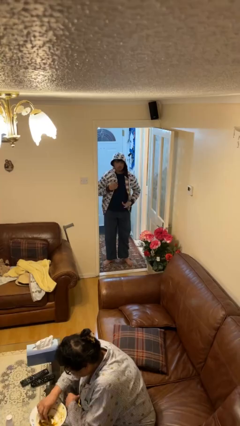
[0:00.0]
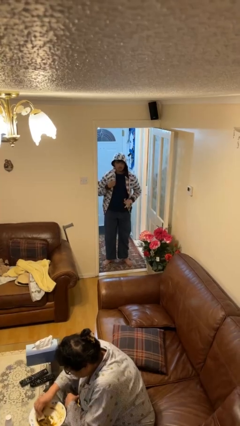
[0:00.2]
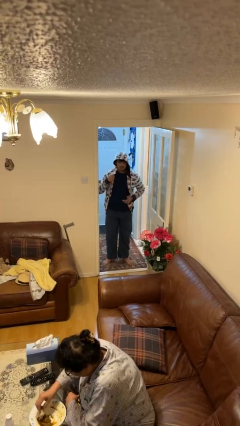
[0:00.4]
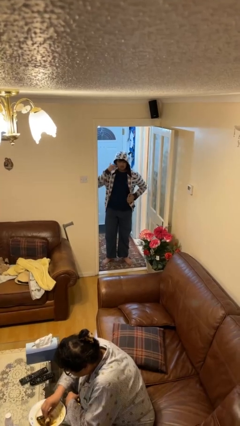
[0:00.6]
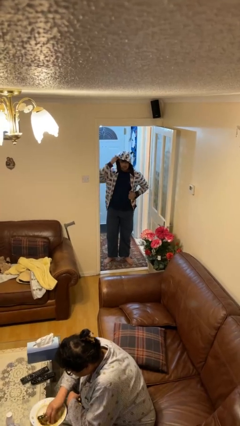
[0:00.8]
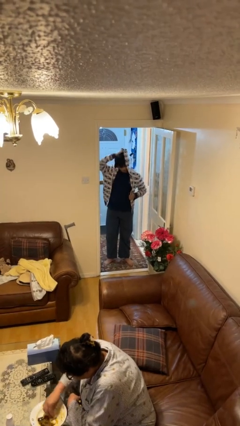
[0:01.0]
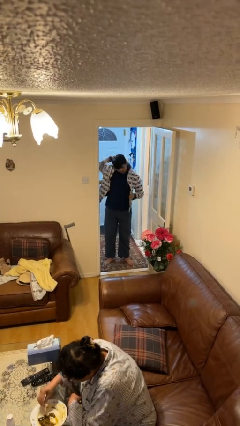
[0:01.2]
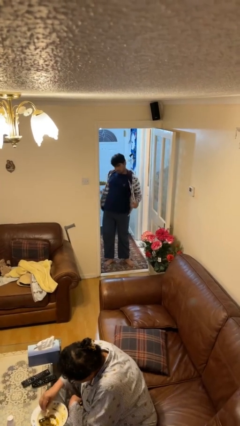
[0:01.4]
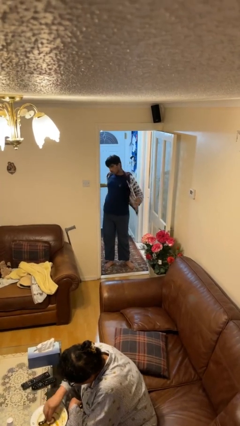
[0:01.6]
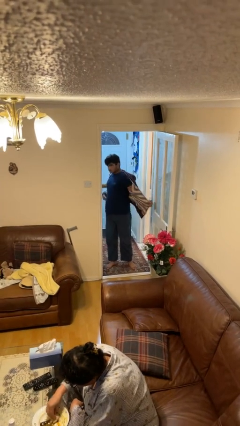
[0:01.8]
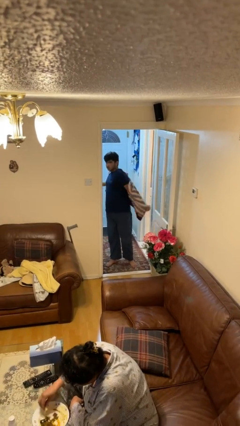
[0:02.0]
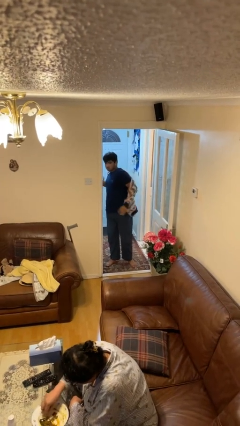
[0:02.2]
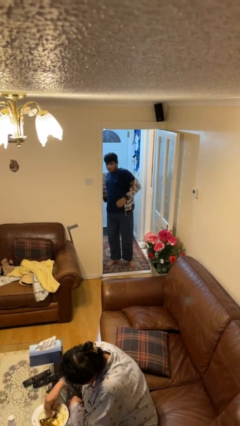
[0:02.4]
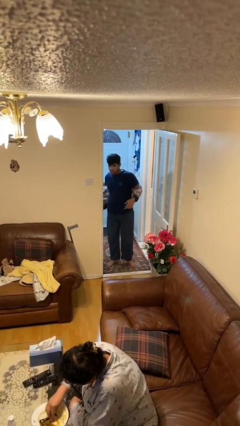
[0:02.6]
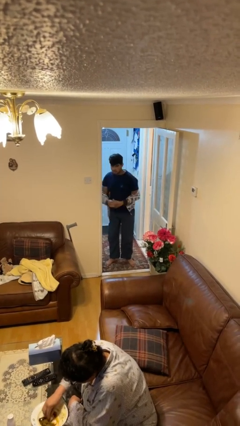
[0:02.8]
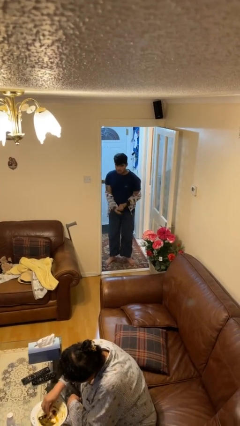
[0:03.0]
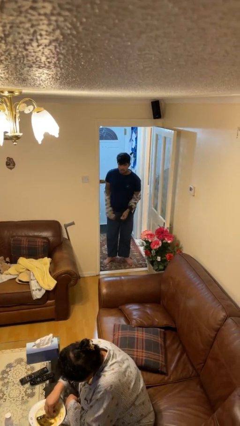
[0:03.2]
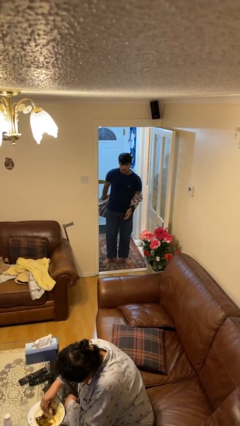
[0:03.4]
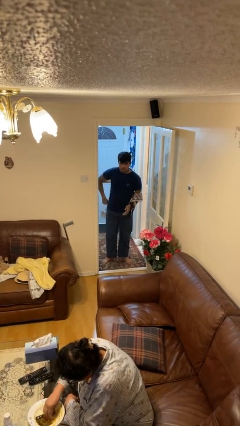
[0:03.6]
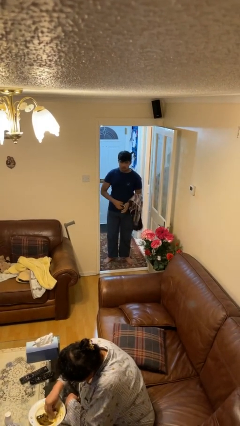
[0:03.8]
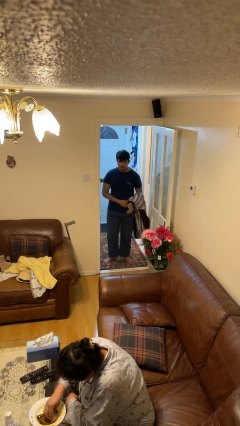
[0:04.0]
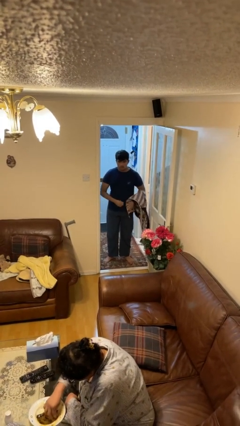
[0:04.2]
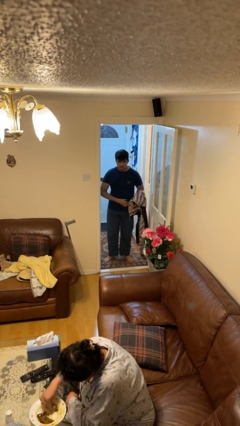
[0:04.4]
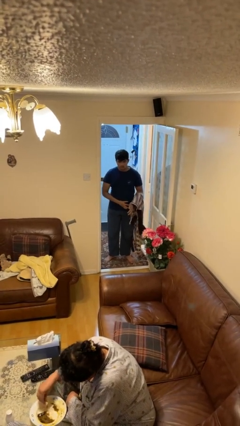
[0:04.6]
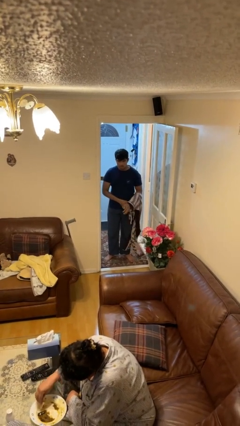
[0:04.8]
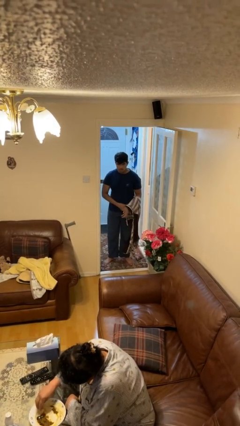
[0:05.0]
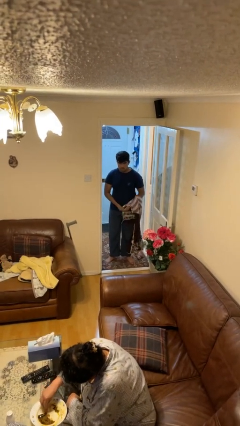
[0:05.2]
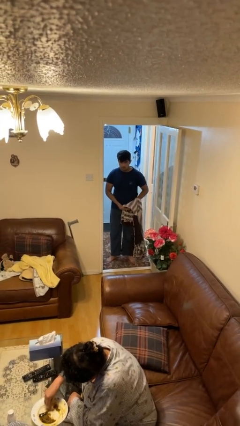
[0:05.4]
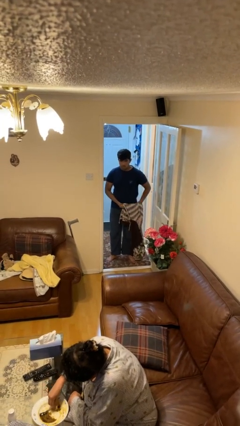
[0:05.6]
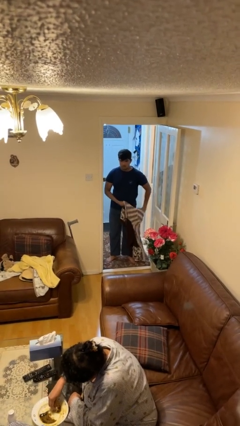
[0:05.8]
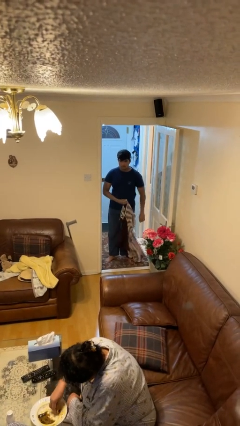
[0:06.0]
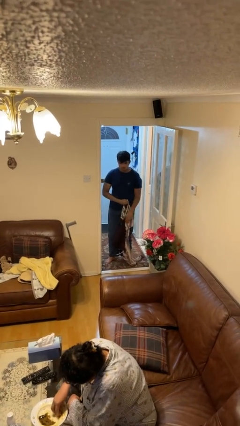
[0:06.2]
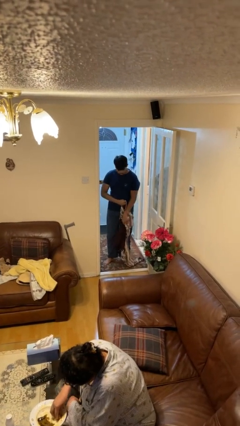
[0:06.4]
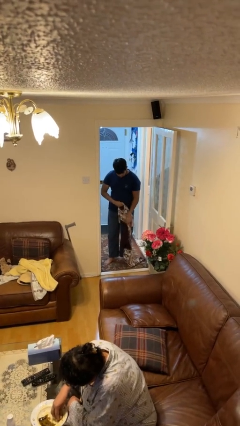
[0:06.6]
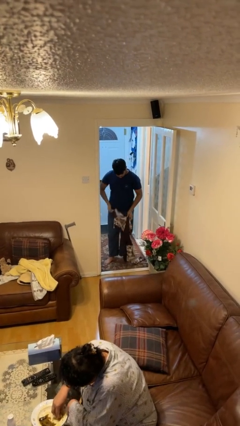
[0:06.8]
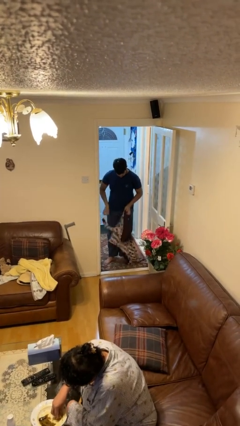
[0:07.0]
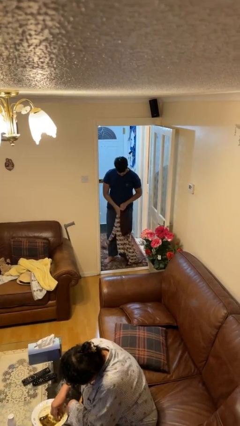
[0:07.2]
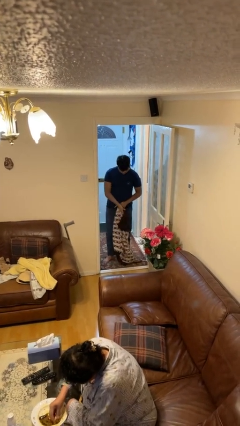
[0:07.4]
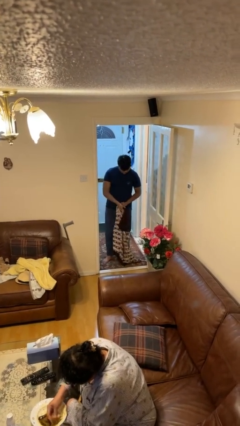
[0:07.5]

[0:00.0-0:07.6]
person takes off hoodie

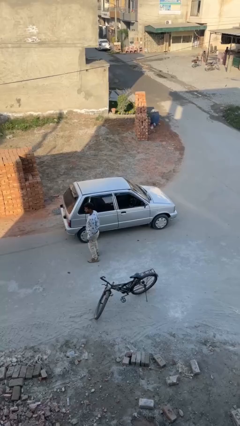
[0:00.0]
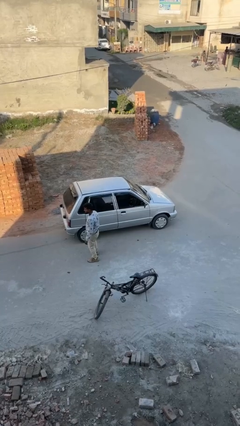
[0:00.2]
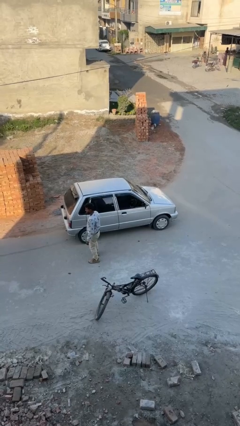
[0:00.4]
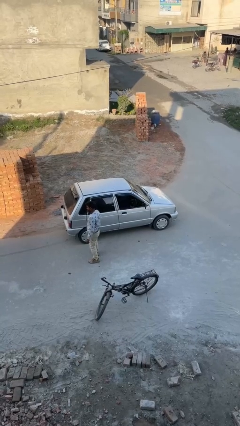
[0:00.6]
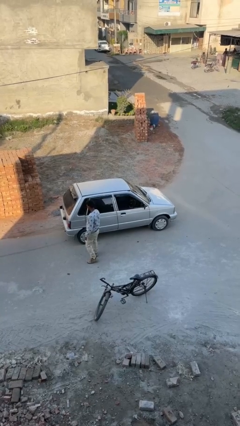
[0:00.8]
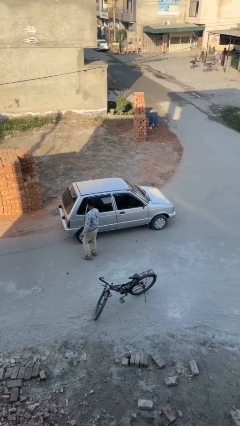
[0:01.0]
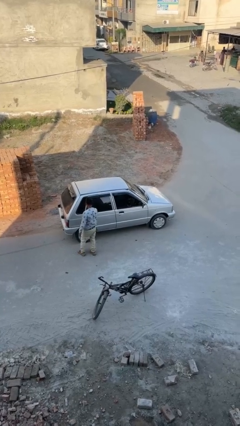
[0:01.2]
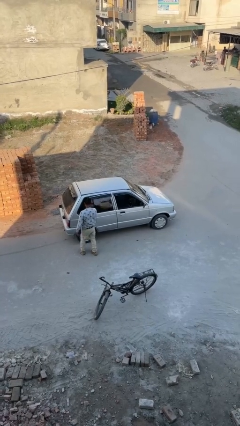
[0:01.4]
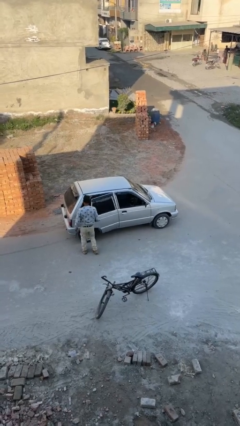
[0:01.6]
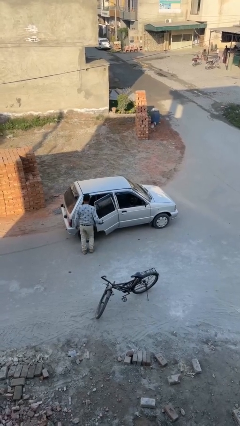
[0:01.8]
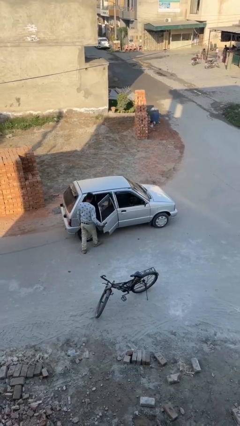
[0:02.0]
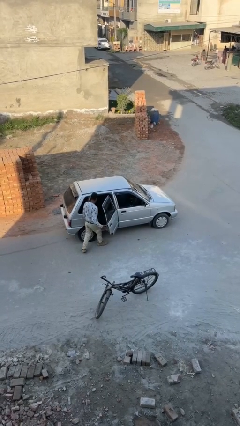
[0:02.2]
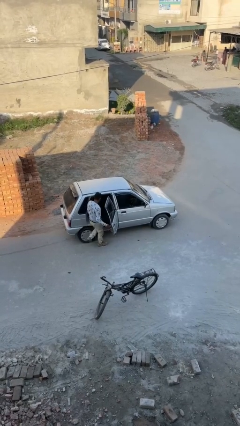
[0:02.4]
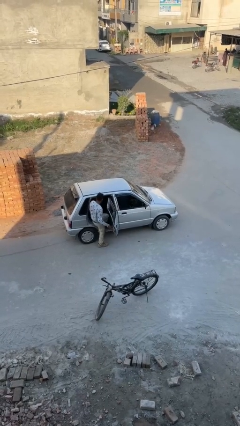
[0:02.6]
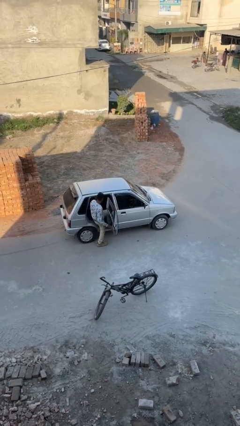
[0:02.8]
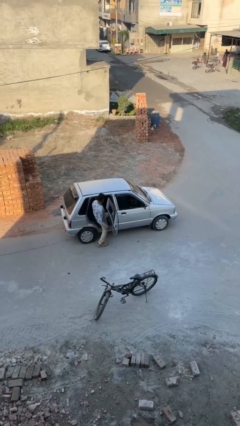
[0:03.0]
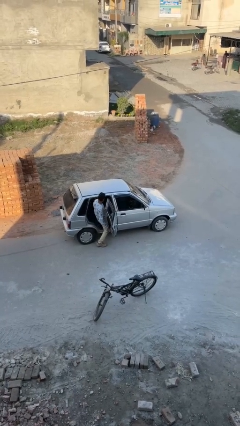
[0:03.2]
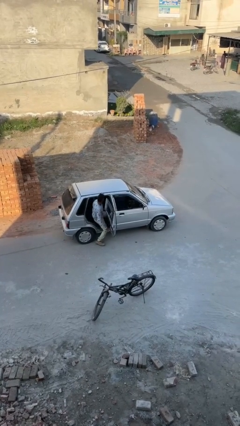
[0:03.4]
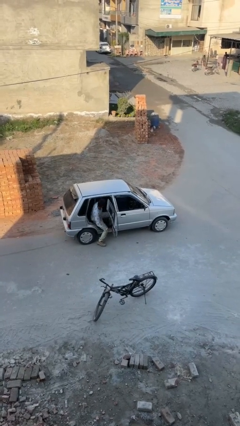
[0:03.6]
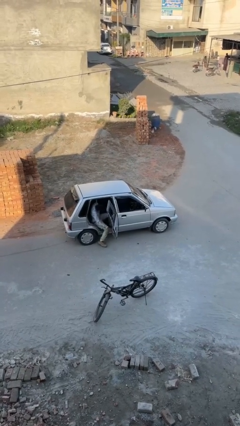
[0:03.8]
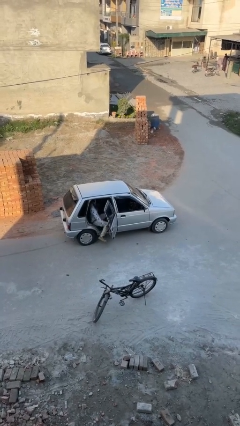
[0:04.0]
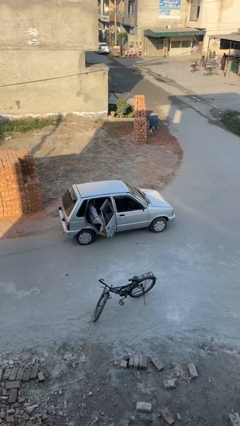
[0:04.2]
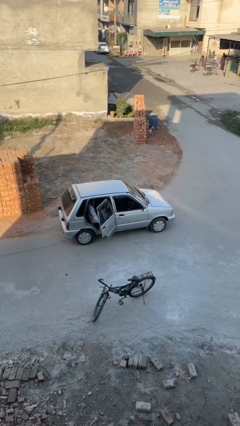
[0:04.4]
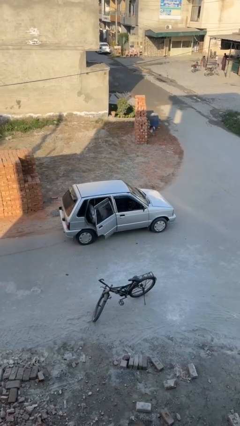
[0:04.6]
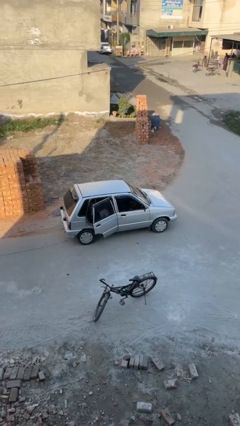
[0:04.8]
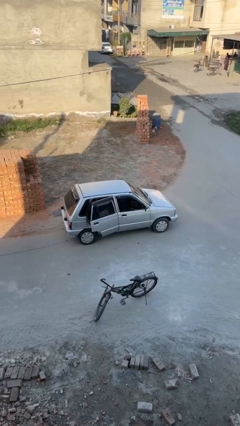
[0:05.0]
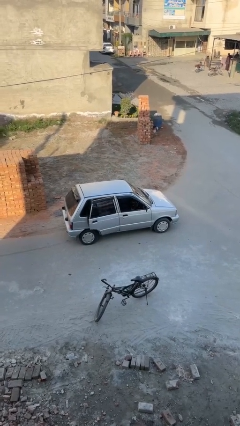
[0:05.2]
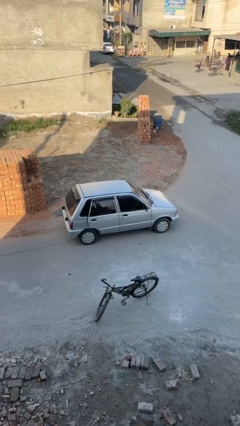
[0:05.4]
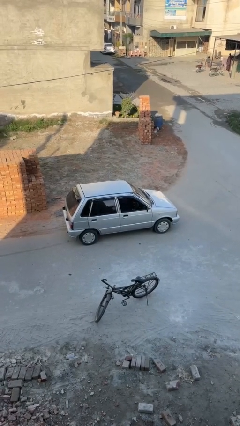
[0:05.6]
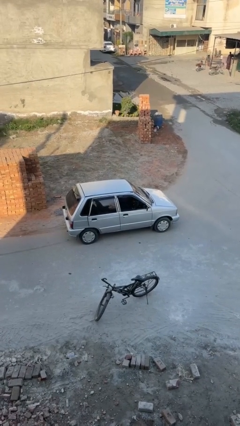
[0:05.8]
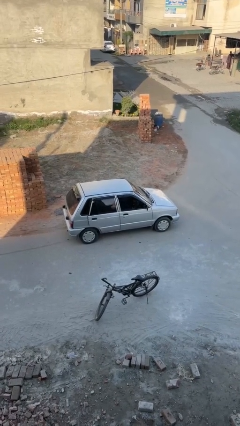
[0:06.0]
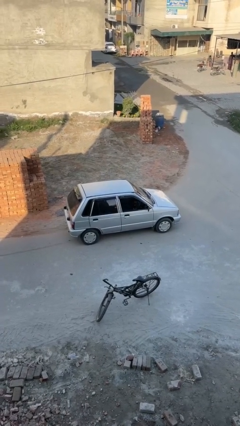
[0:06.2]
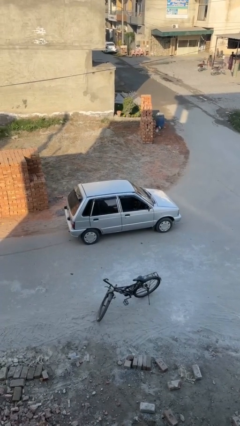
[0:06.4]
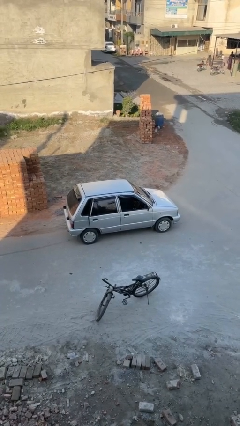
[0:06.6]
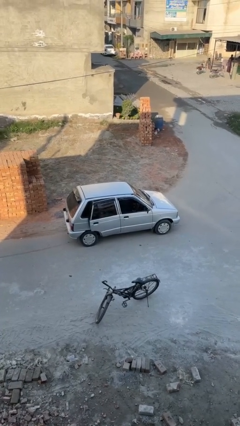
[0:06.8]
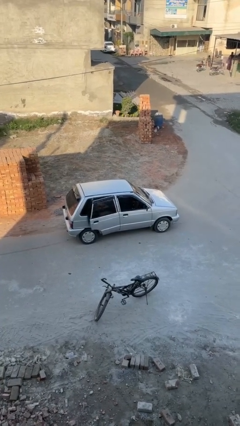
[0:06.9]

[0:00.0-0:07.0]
car picks up person

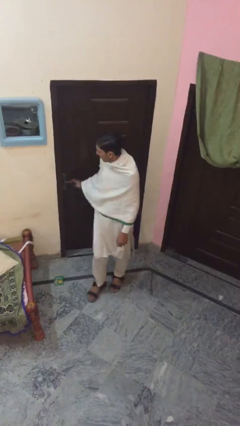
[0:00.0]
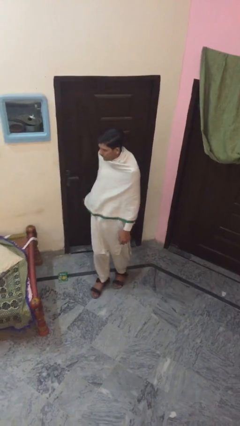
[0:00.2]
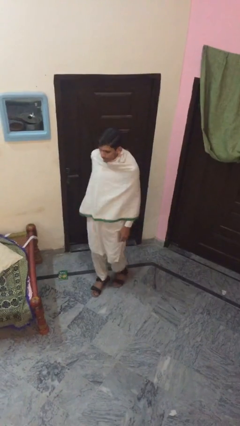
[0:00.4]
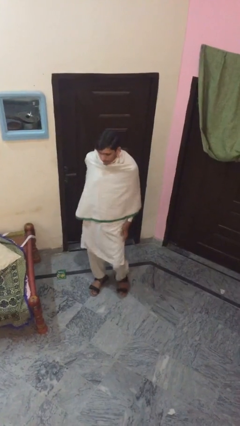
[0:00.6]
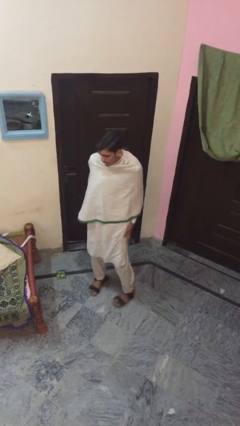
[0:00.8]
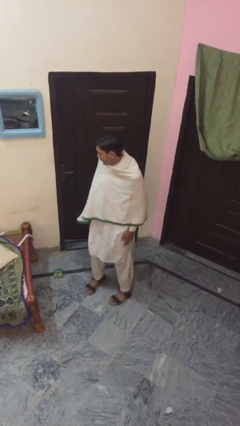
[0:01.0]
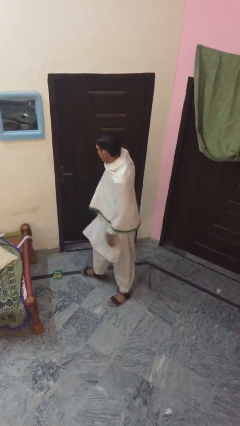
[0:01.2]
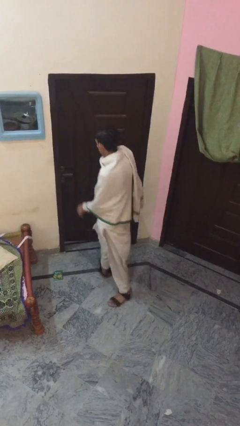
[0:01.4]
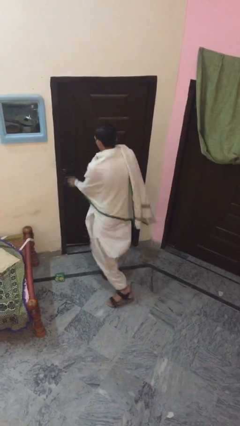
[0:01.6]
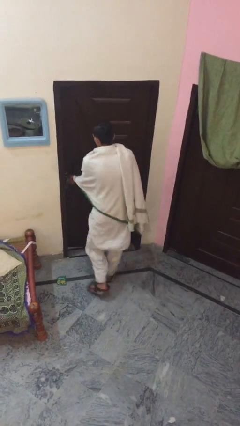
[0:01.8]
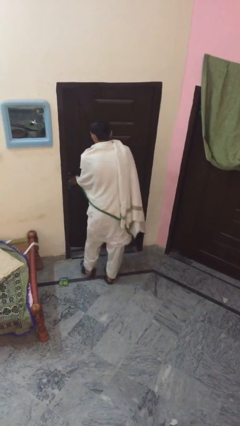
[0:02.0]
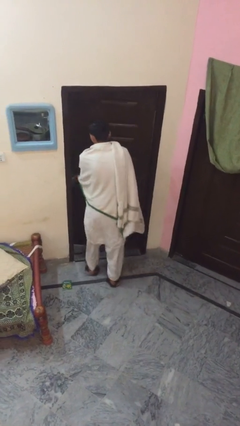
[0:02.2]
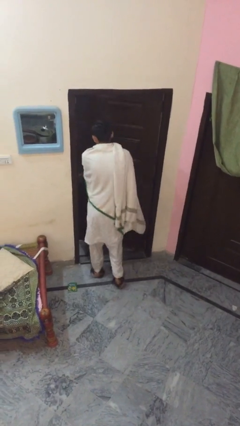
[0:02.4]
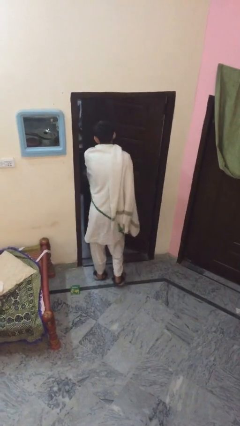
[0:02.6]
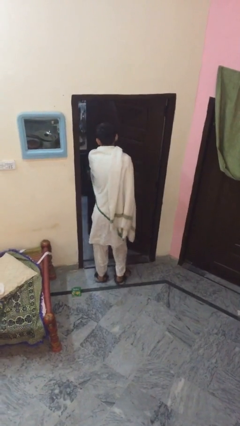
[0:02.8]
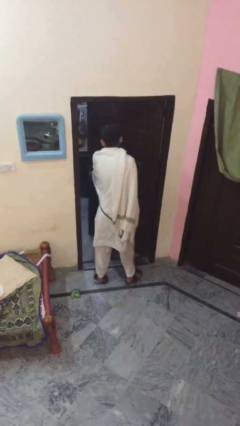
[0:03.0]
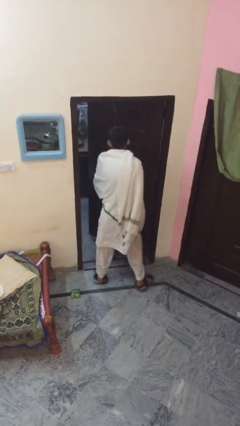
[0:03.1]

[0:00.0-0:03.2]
person opens facility door
